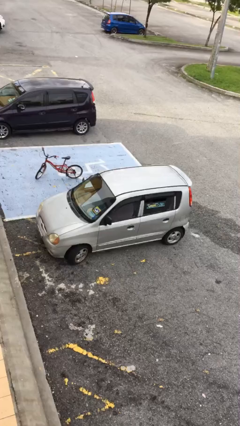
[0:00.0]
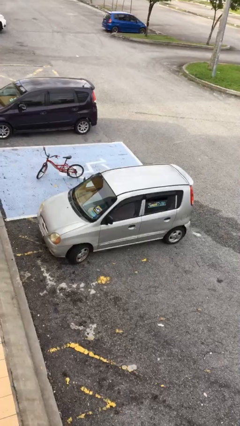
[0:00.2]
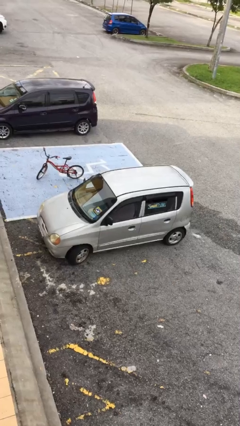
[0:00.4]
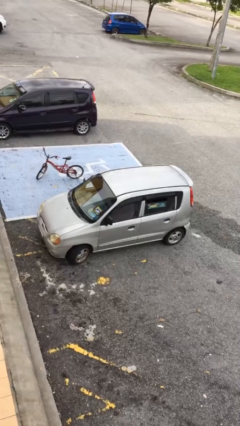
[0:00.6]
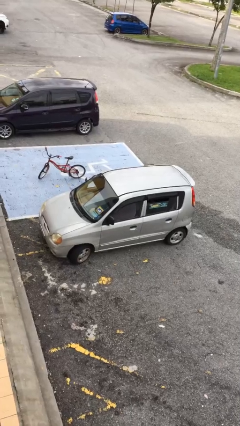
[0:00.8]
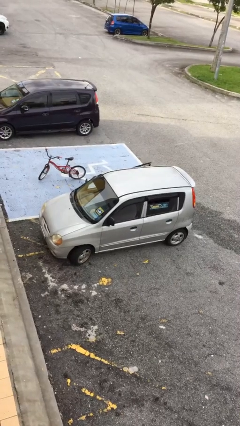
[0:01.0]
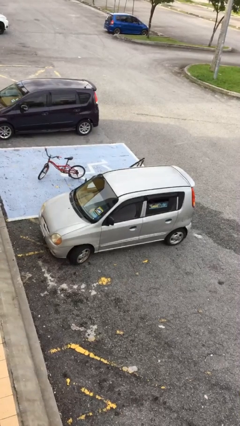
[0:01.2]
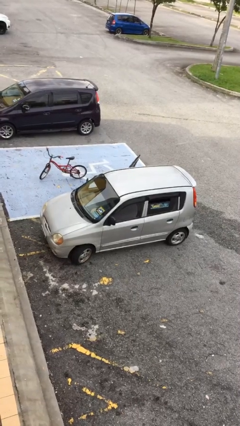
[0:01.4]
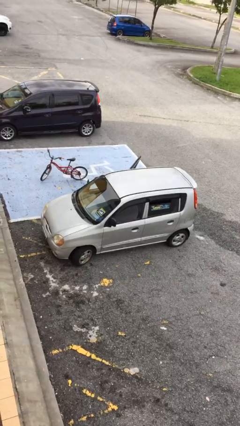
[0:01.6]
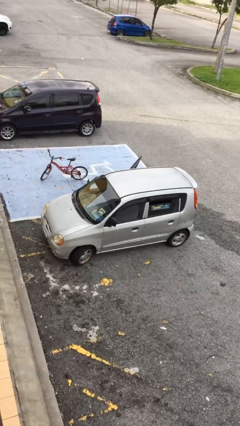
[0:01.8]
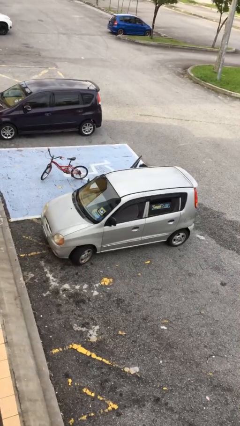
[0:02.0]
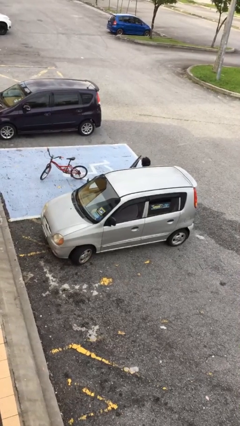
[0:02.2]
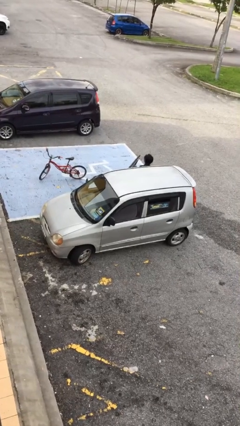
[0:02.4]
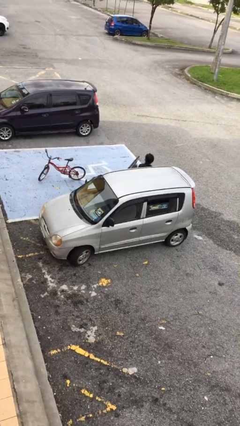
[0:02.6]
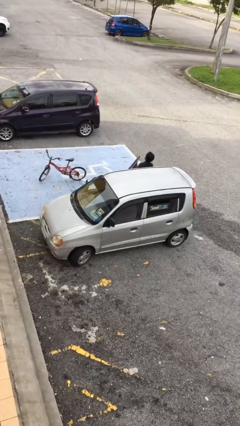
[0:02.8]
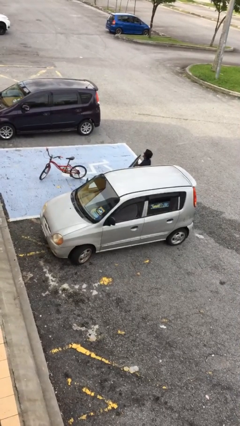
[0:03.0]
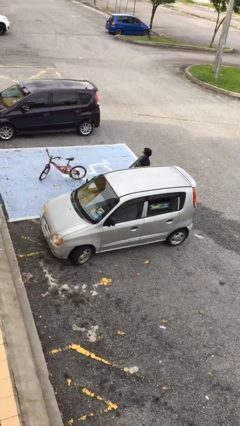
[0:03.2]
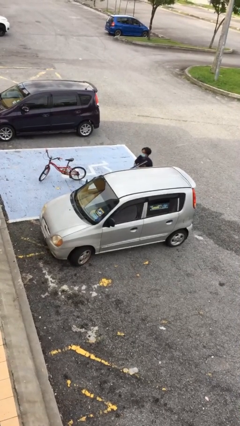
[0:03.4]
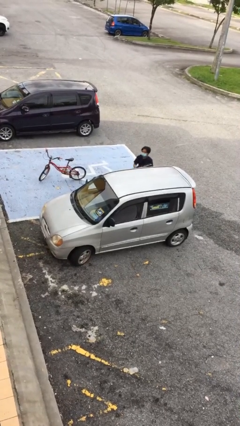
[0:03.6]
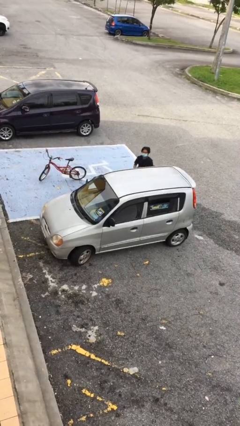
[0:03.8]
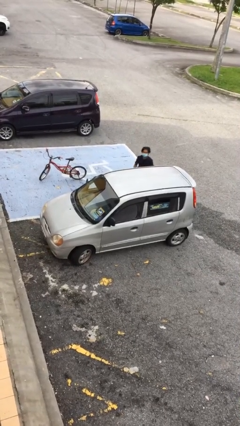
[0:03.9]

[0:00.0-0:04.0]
car drops off person

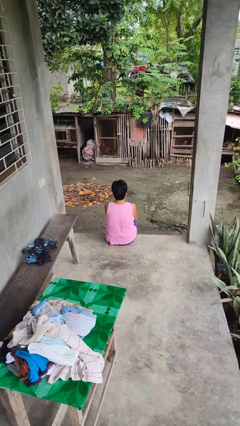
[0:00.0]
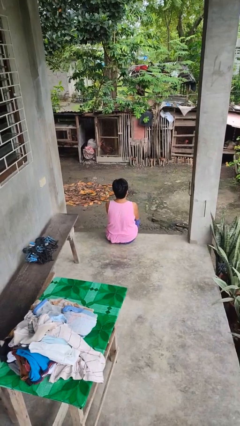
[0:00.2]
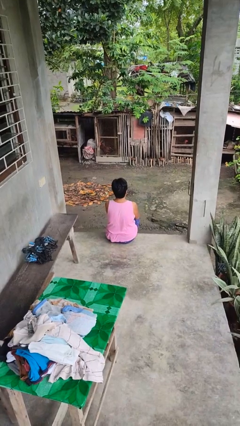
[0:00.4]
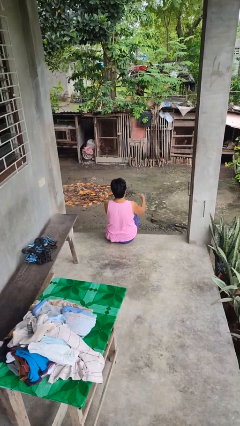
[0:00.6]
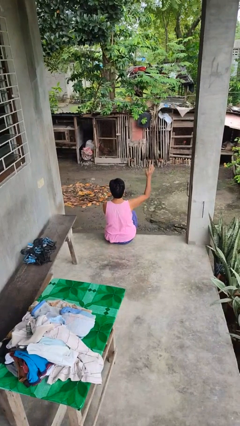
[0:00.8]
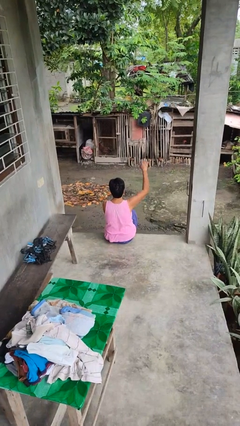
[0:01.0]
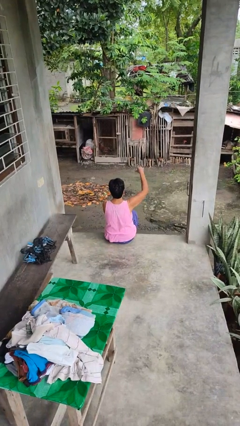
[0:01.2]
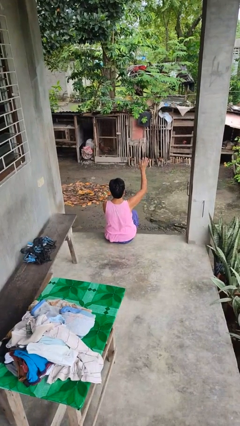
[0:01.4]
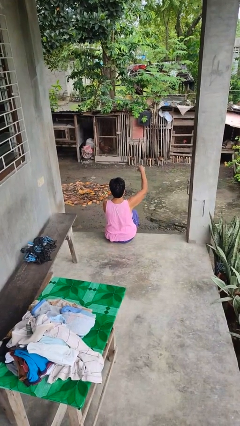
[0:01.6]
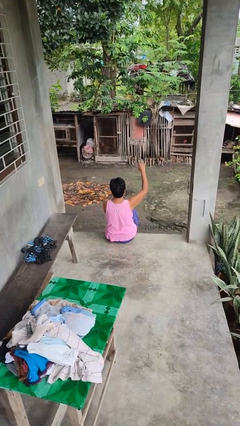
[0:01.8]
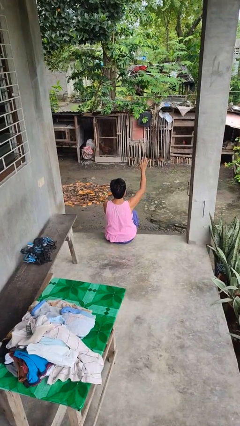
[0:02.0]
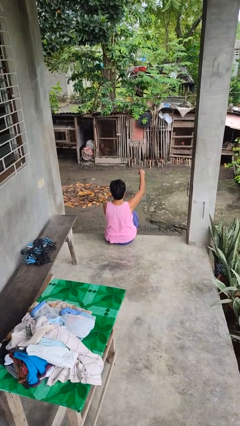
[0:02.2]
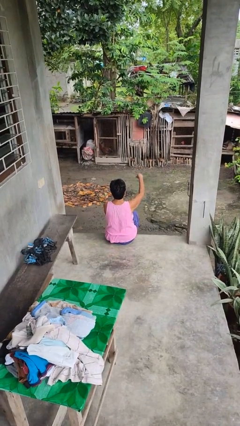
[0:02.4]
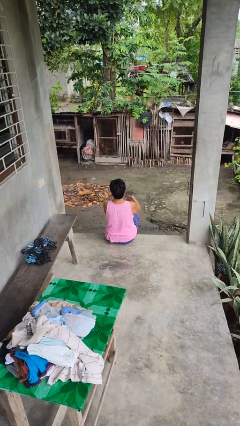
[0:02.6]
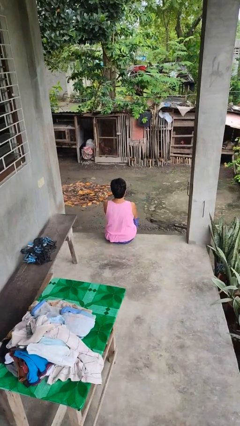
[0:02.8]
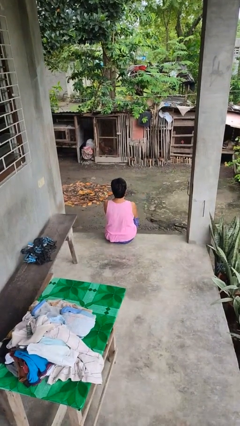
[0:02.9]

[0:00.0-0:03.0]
person gestures come here

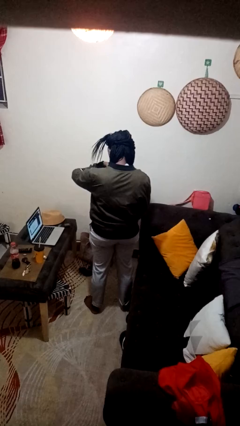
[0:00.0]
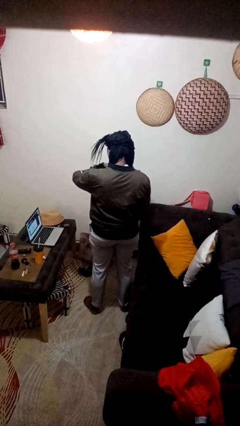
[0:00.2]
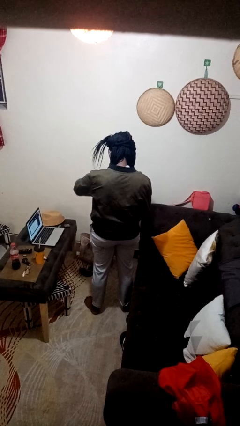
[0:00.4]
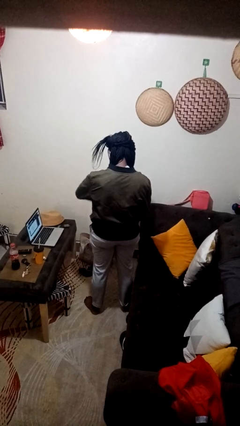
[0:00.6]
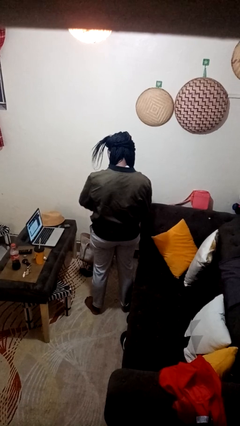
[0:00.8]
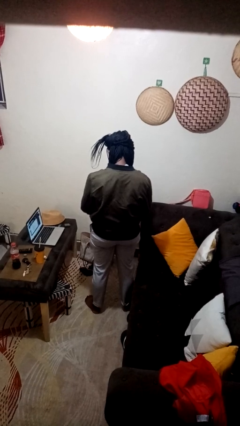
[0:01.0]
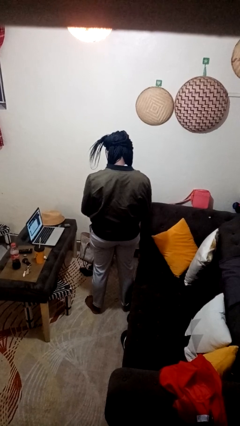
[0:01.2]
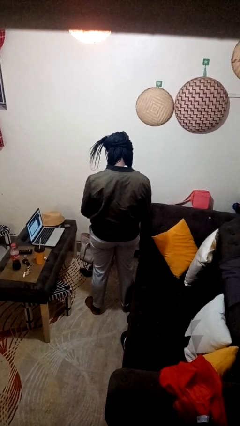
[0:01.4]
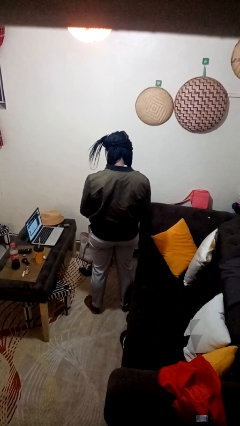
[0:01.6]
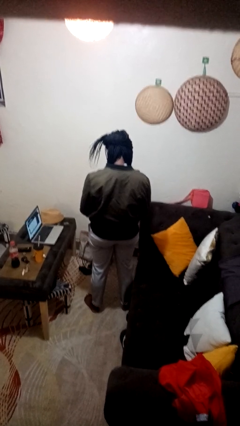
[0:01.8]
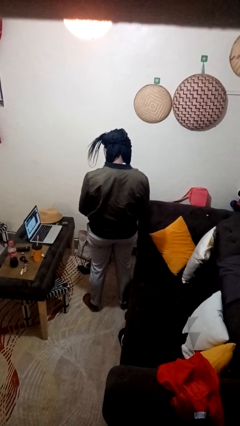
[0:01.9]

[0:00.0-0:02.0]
person unzips jacket

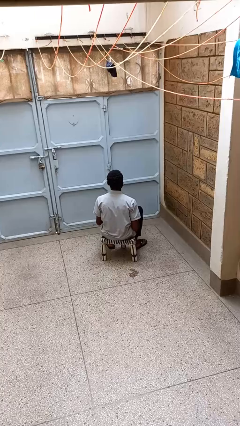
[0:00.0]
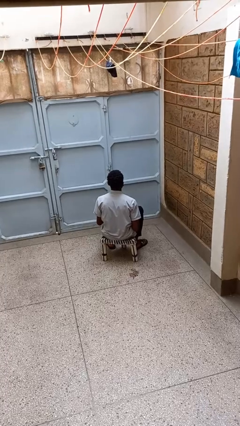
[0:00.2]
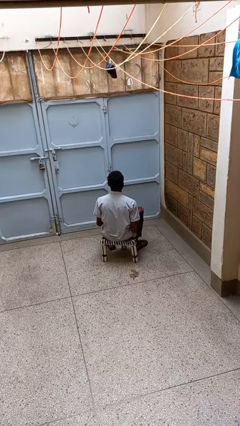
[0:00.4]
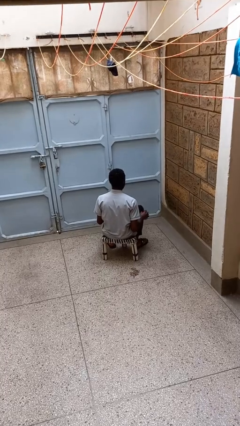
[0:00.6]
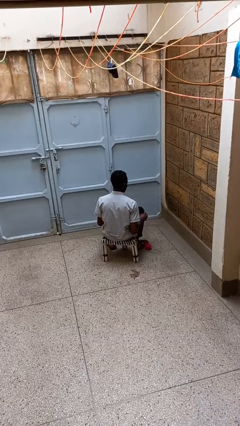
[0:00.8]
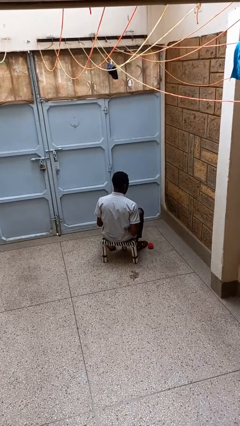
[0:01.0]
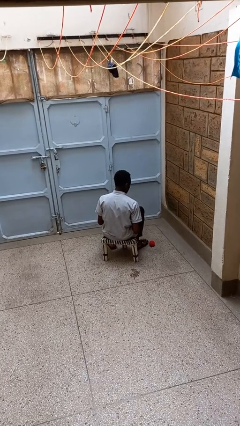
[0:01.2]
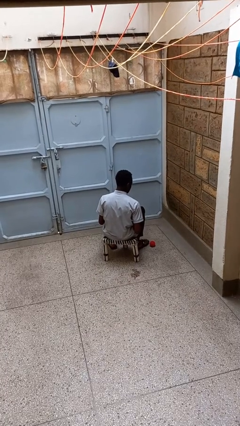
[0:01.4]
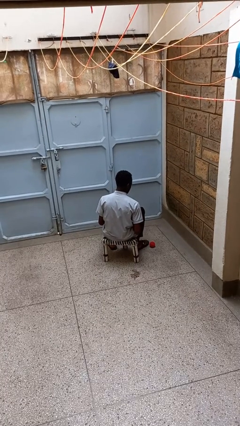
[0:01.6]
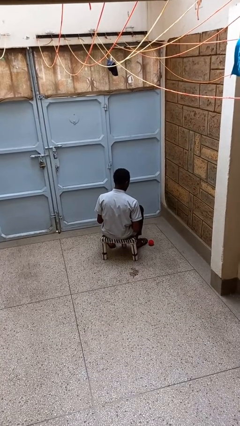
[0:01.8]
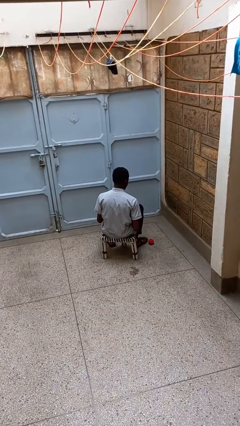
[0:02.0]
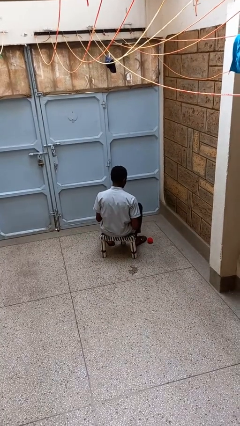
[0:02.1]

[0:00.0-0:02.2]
person drops object

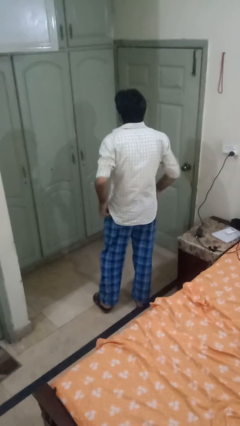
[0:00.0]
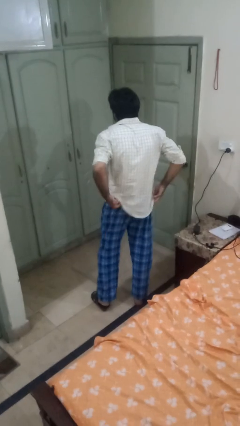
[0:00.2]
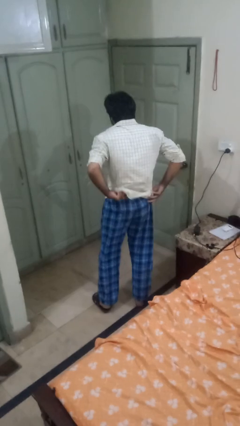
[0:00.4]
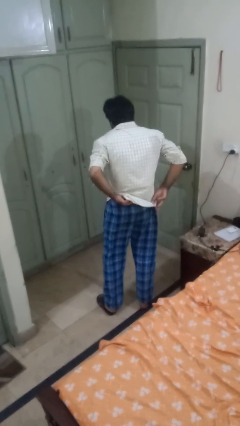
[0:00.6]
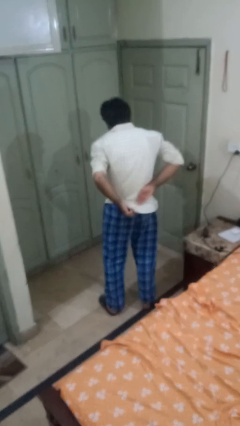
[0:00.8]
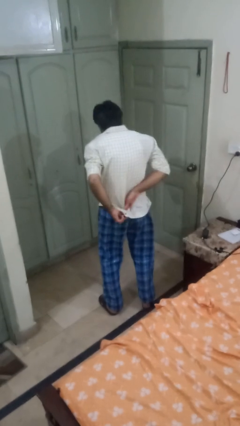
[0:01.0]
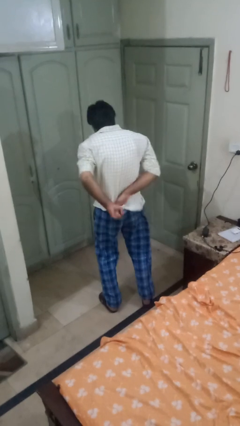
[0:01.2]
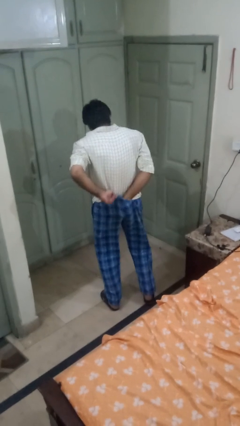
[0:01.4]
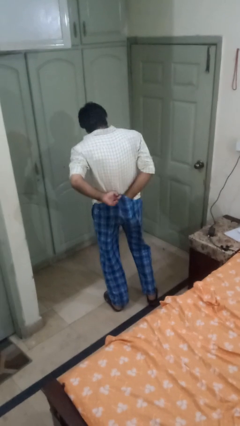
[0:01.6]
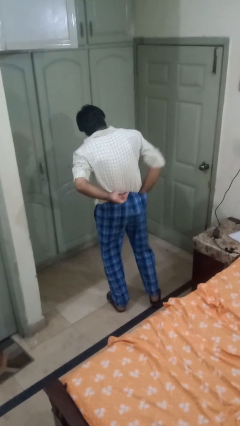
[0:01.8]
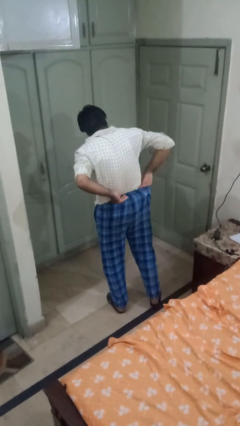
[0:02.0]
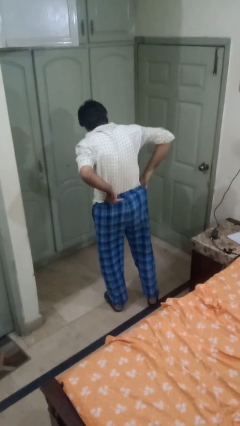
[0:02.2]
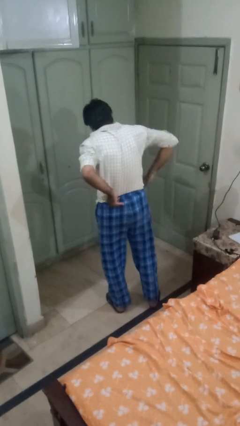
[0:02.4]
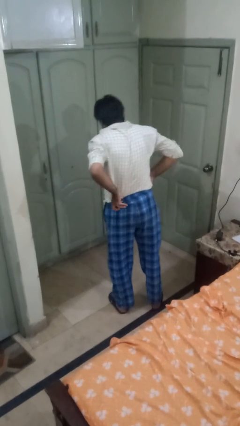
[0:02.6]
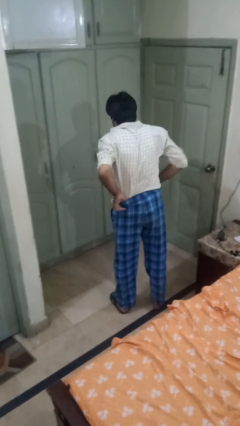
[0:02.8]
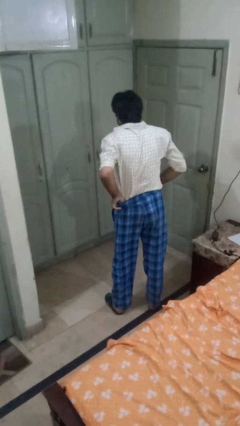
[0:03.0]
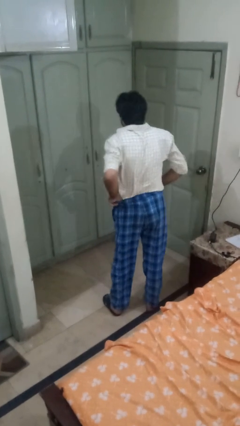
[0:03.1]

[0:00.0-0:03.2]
person tucks in shirt

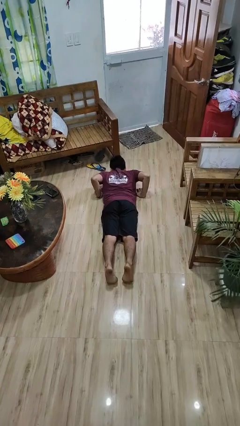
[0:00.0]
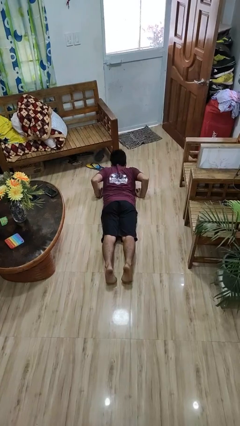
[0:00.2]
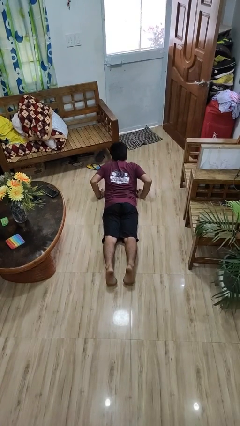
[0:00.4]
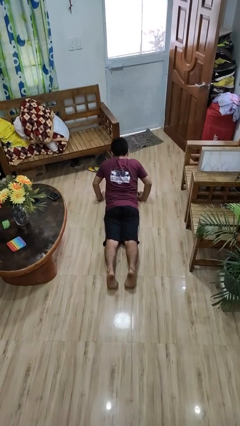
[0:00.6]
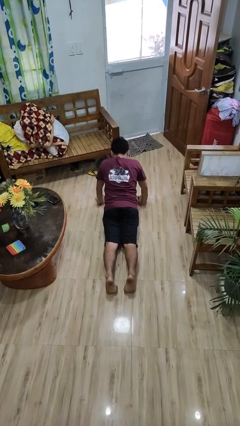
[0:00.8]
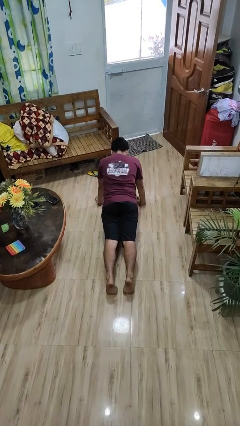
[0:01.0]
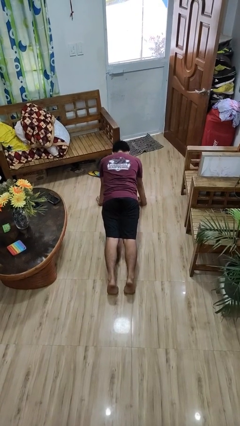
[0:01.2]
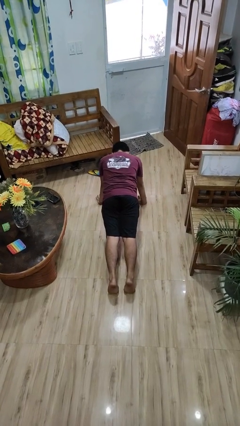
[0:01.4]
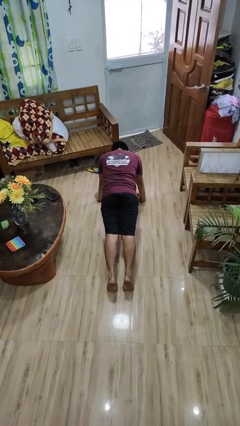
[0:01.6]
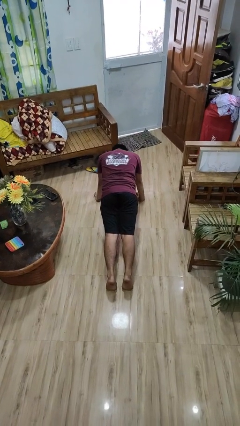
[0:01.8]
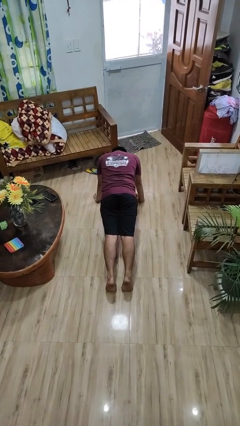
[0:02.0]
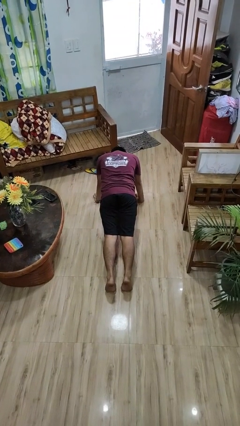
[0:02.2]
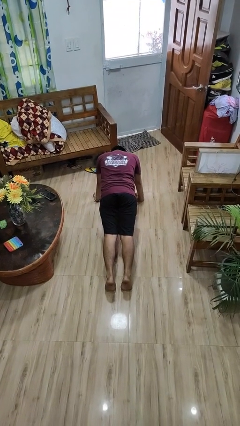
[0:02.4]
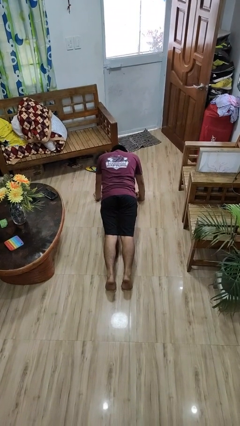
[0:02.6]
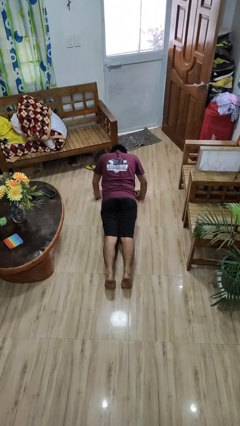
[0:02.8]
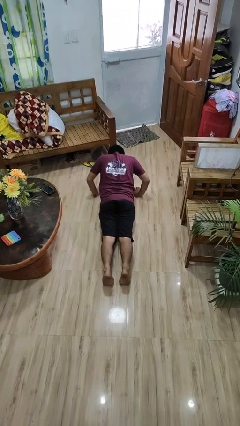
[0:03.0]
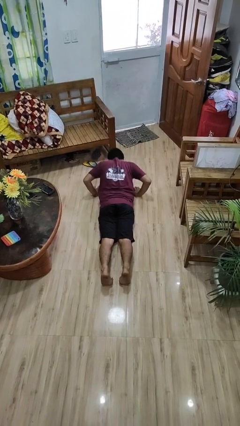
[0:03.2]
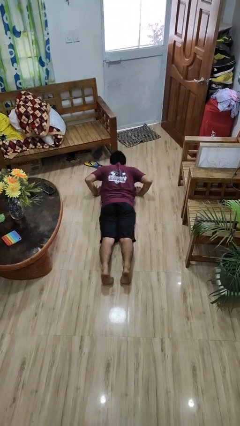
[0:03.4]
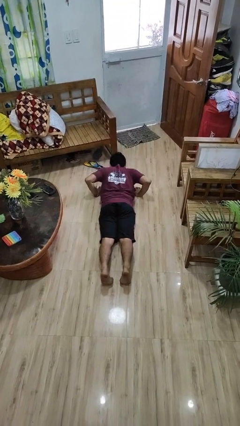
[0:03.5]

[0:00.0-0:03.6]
person exercises with pushup
